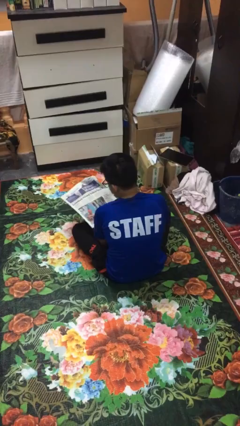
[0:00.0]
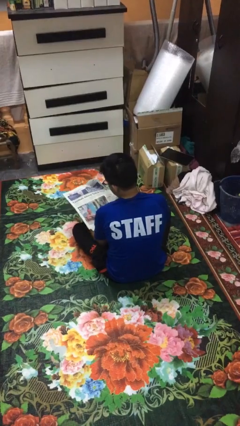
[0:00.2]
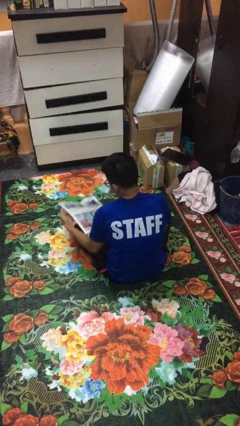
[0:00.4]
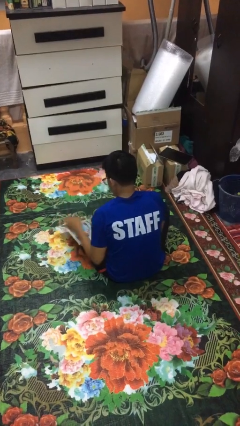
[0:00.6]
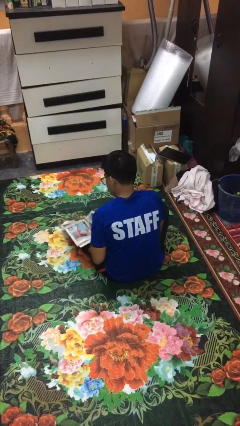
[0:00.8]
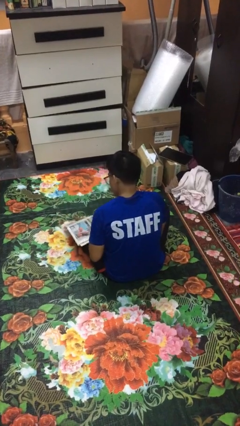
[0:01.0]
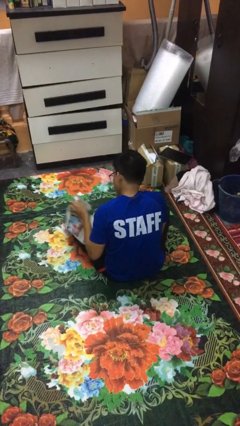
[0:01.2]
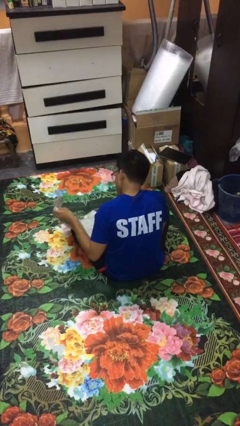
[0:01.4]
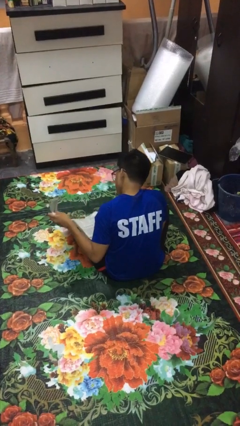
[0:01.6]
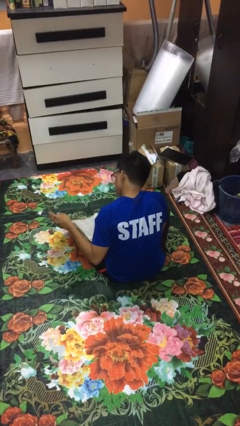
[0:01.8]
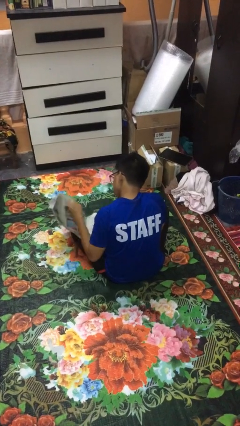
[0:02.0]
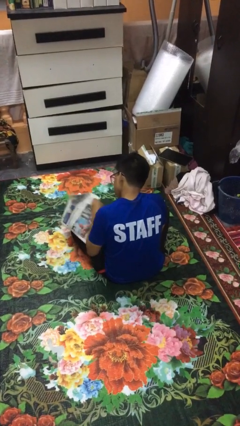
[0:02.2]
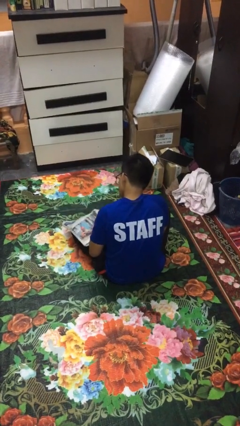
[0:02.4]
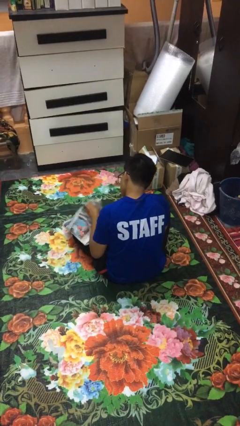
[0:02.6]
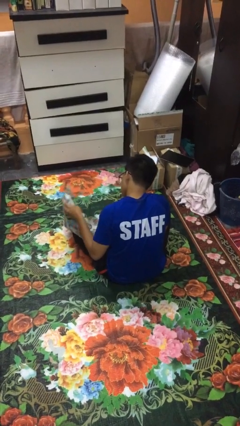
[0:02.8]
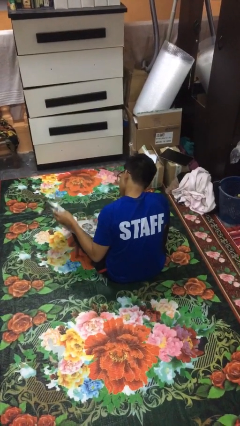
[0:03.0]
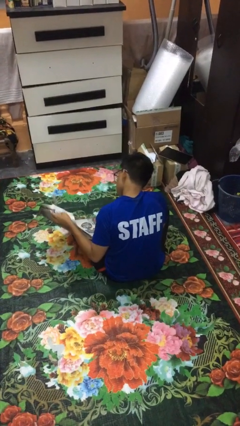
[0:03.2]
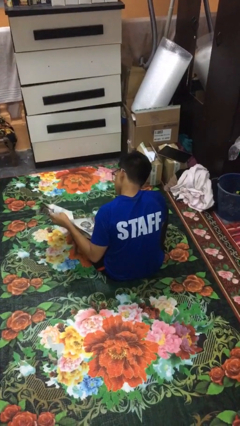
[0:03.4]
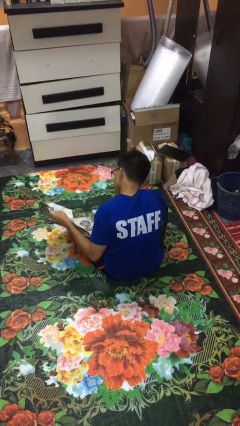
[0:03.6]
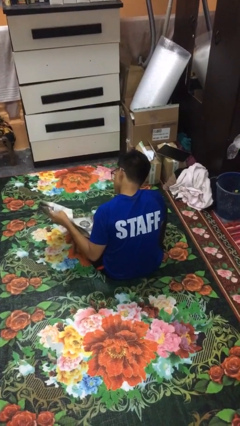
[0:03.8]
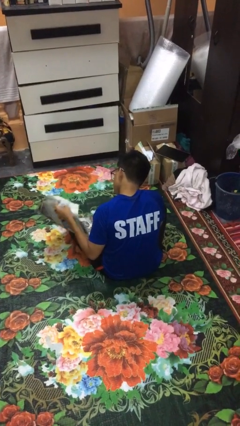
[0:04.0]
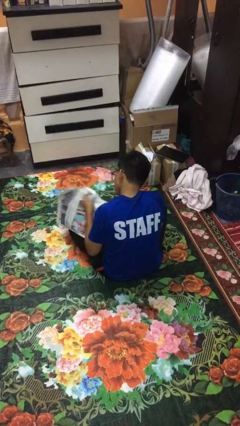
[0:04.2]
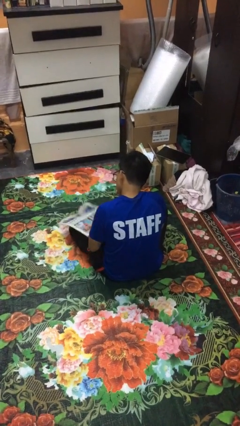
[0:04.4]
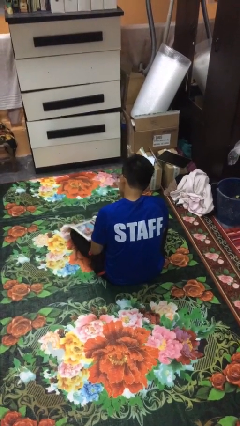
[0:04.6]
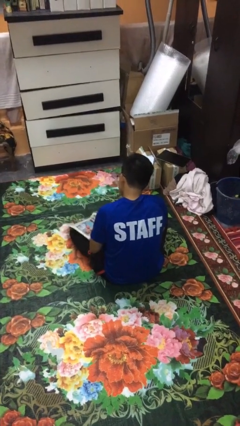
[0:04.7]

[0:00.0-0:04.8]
person reads newspaper

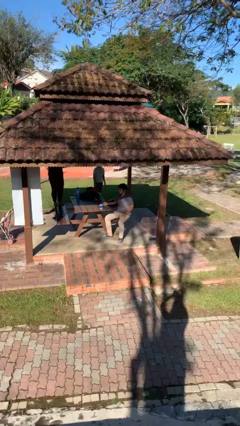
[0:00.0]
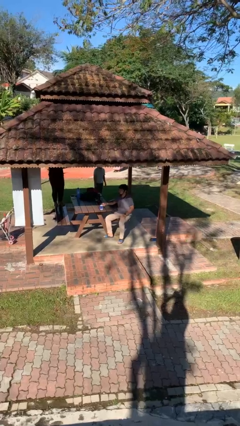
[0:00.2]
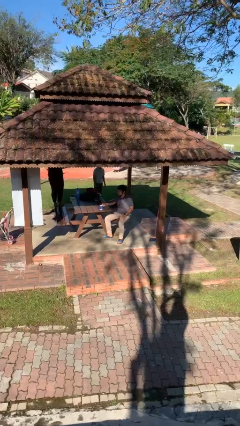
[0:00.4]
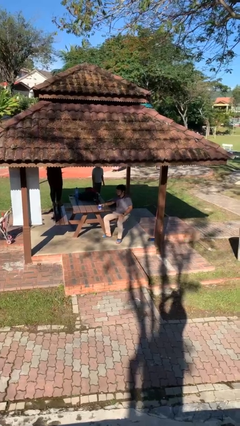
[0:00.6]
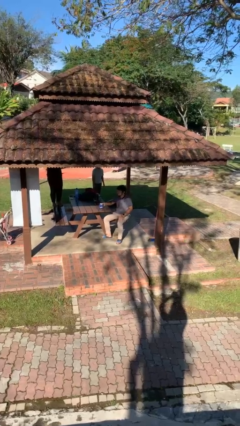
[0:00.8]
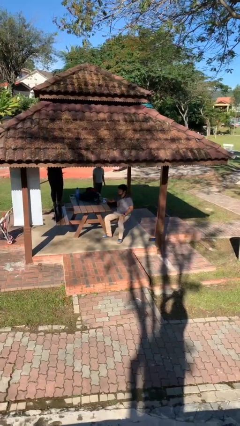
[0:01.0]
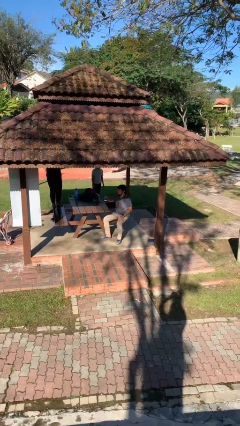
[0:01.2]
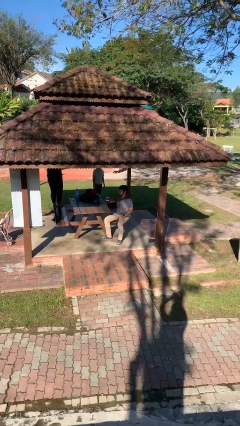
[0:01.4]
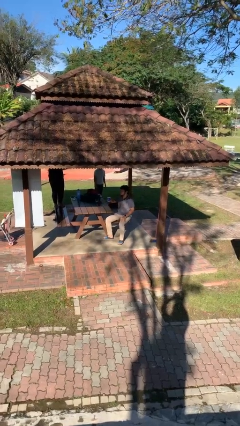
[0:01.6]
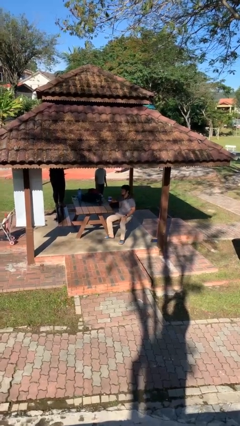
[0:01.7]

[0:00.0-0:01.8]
person picks up object from table

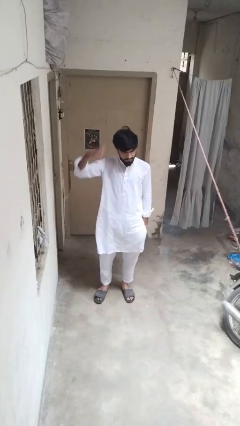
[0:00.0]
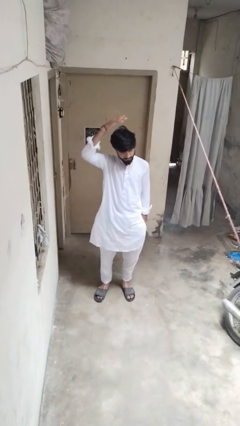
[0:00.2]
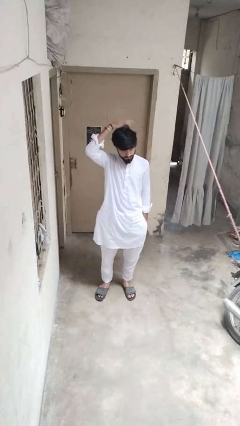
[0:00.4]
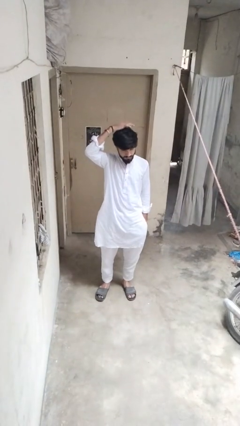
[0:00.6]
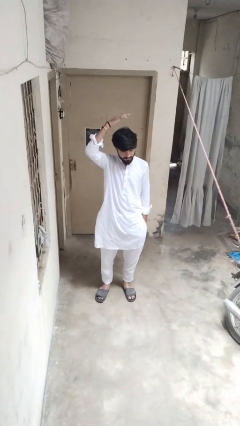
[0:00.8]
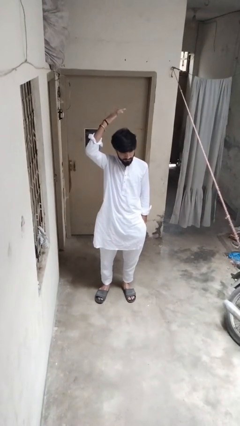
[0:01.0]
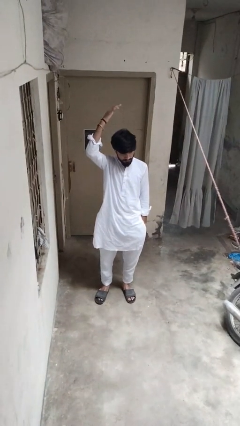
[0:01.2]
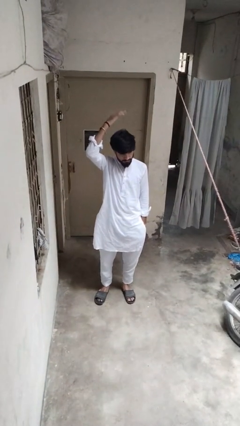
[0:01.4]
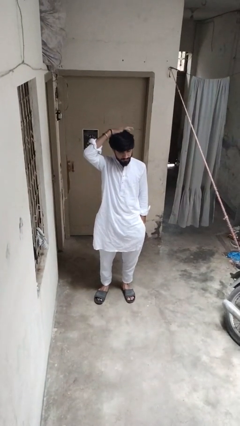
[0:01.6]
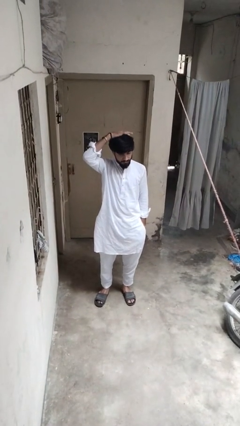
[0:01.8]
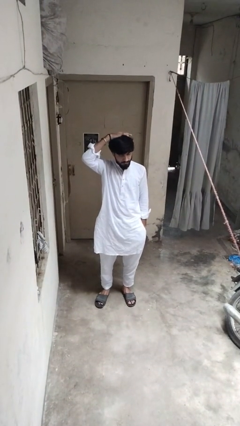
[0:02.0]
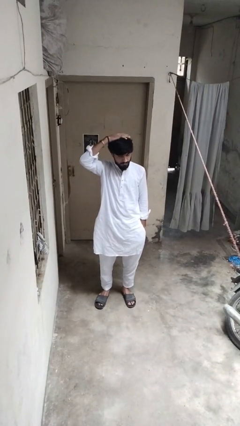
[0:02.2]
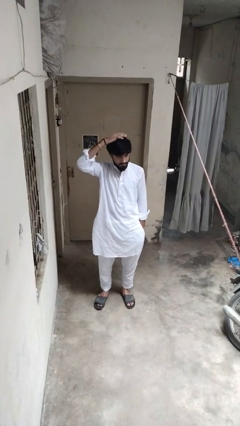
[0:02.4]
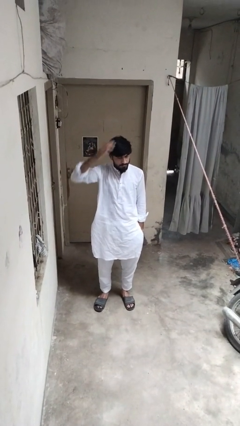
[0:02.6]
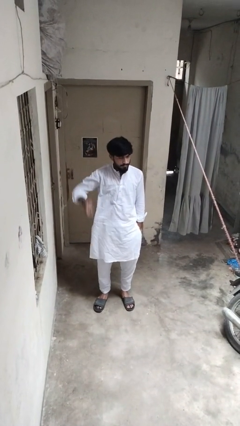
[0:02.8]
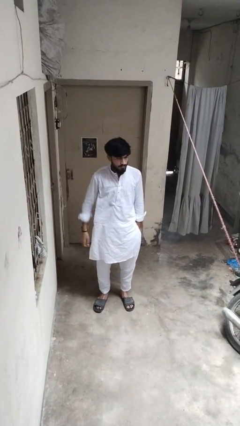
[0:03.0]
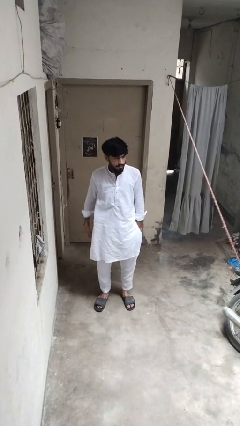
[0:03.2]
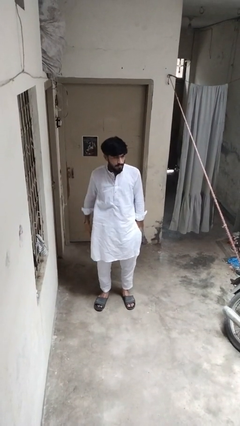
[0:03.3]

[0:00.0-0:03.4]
person pats head

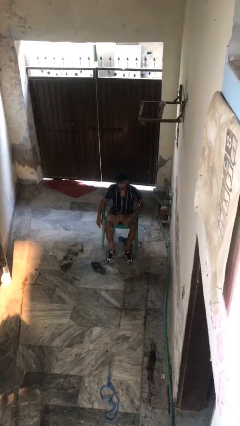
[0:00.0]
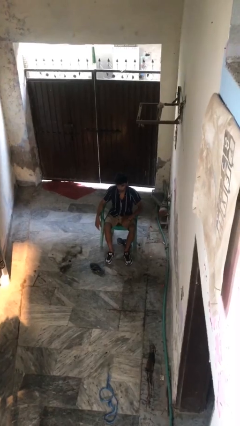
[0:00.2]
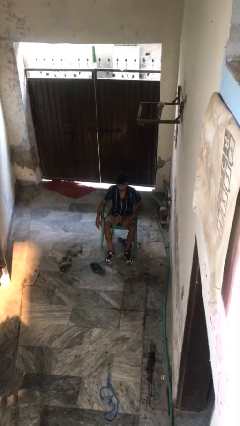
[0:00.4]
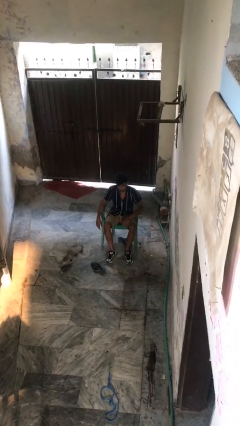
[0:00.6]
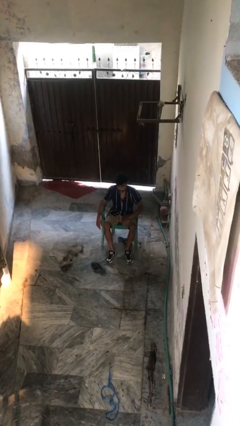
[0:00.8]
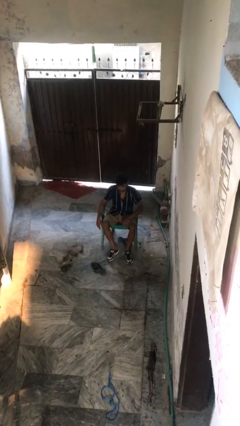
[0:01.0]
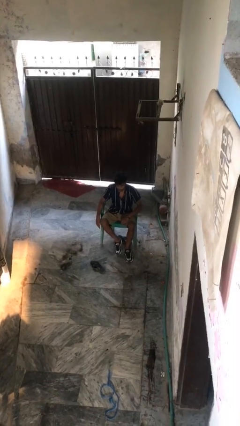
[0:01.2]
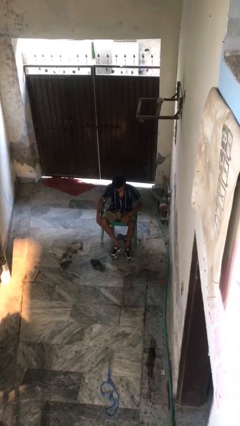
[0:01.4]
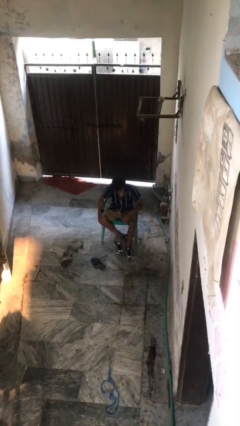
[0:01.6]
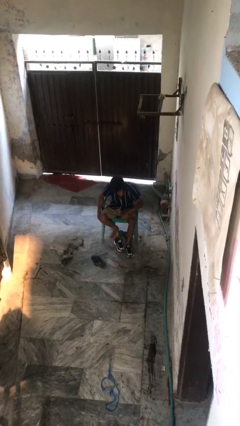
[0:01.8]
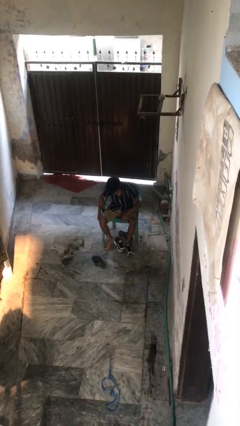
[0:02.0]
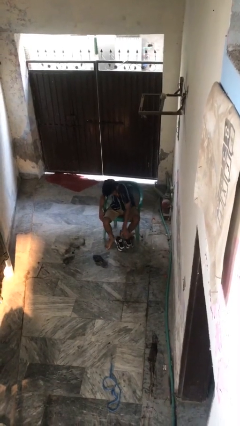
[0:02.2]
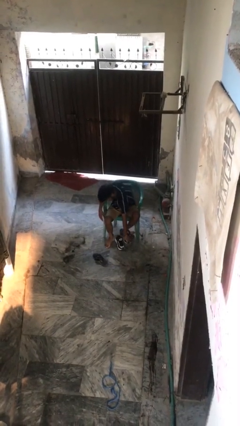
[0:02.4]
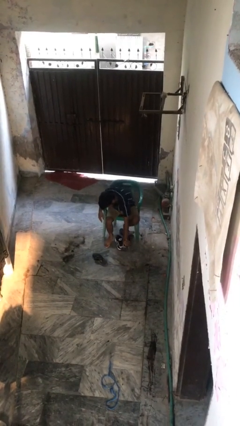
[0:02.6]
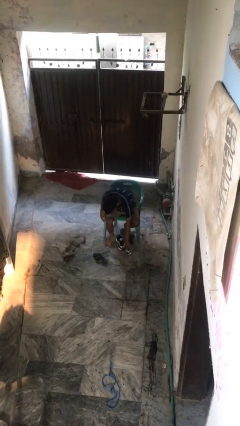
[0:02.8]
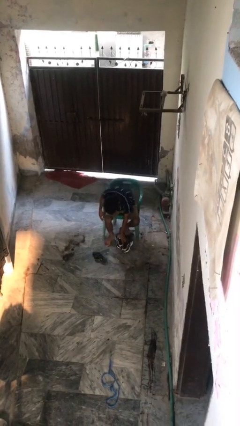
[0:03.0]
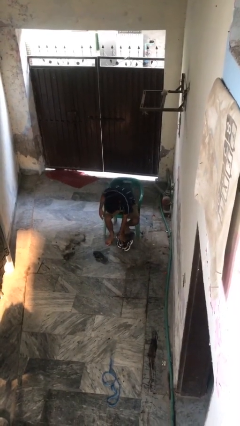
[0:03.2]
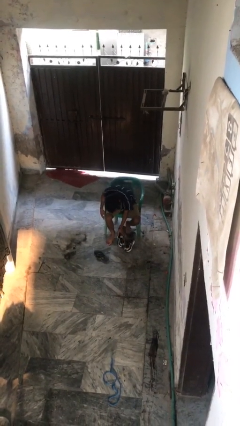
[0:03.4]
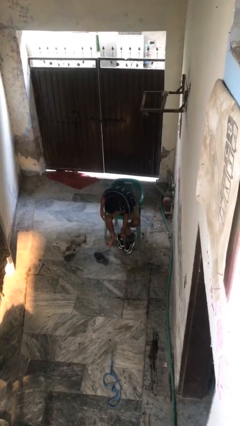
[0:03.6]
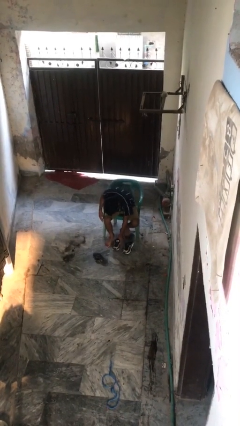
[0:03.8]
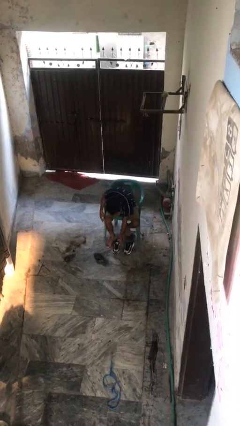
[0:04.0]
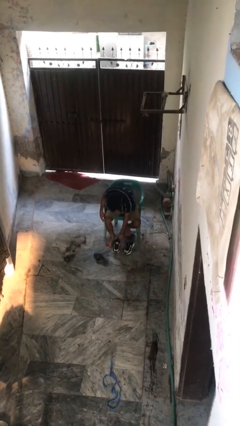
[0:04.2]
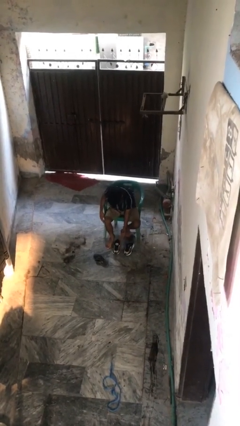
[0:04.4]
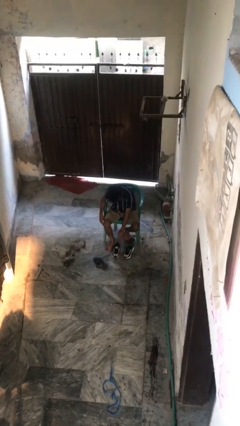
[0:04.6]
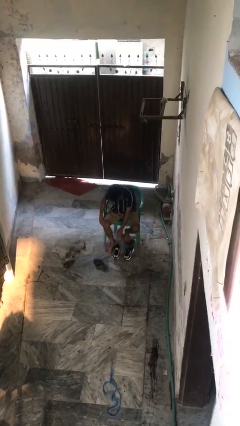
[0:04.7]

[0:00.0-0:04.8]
person takes off shoes

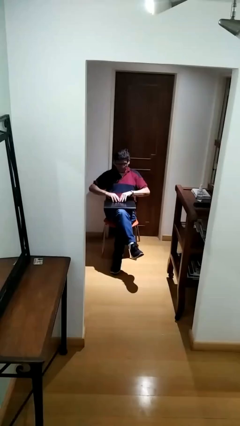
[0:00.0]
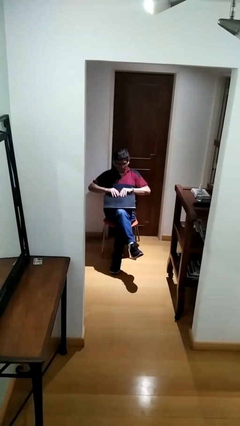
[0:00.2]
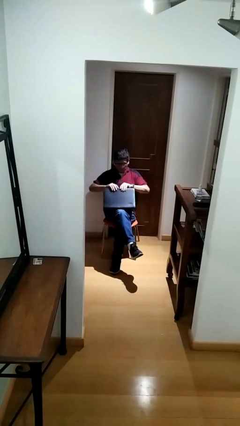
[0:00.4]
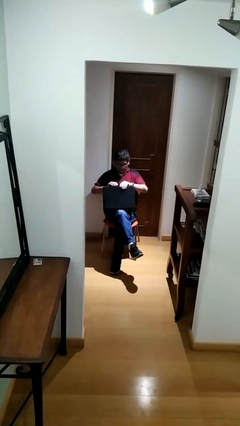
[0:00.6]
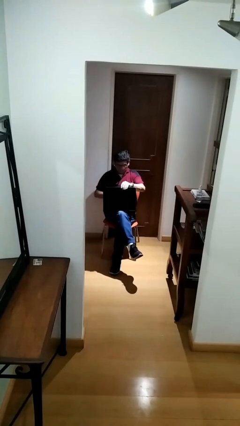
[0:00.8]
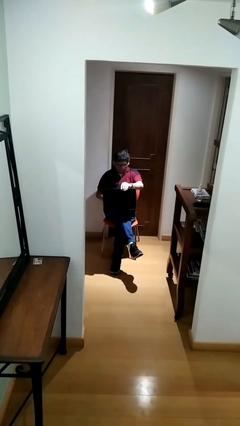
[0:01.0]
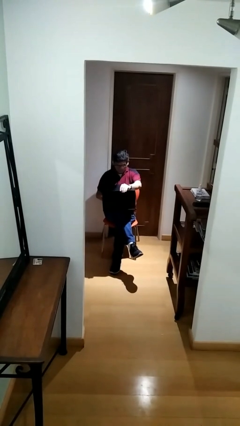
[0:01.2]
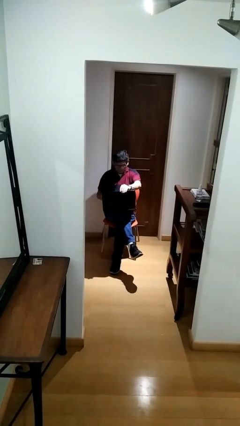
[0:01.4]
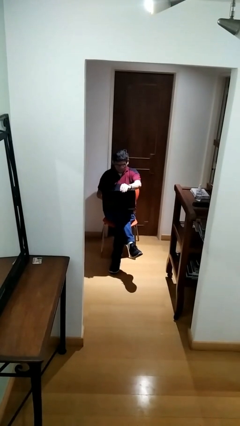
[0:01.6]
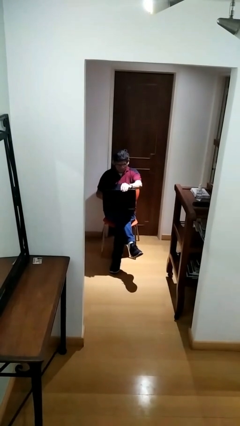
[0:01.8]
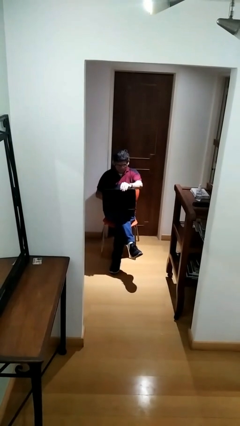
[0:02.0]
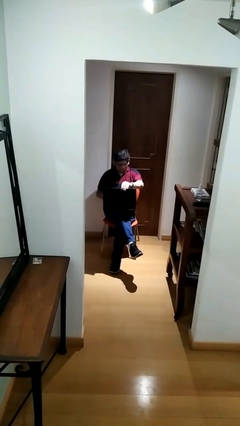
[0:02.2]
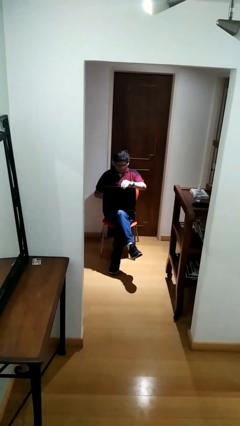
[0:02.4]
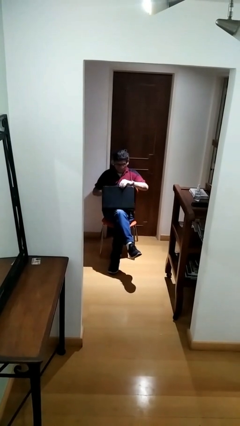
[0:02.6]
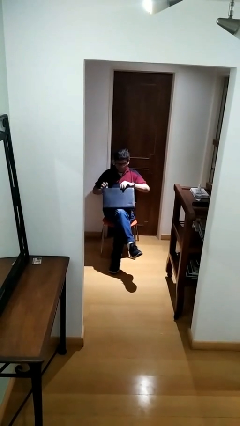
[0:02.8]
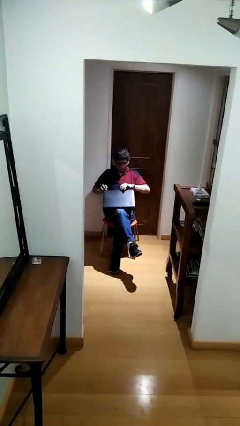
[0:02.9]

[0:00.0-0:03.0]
person interacts with laptop
